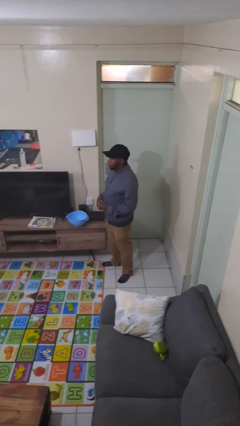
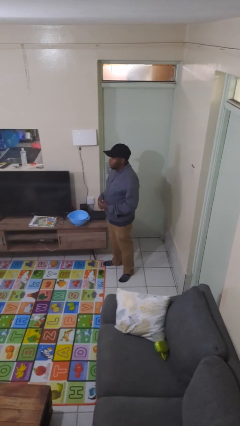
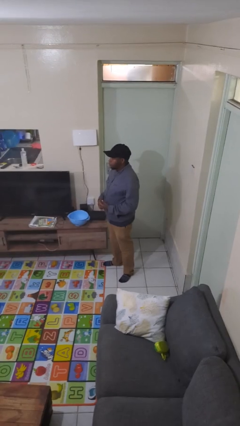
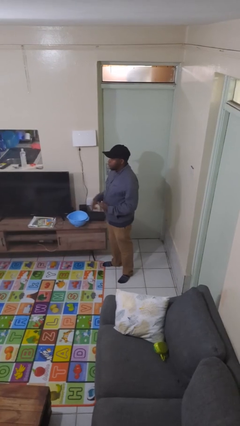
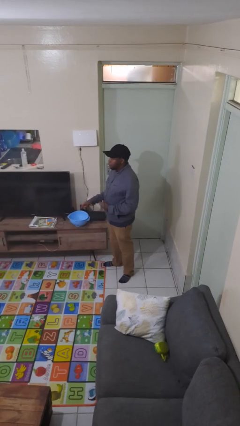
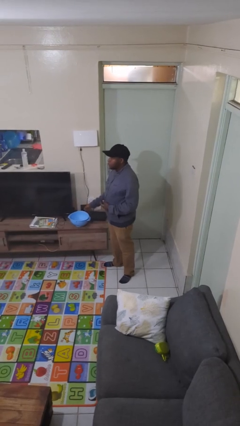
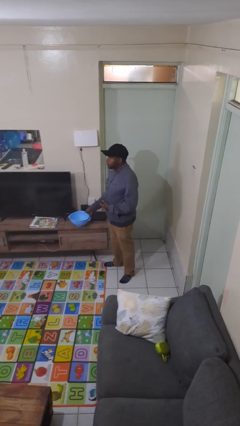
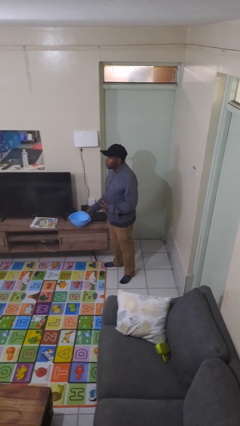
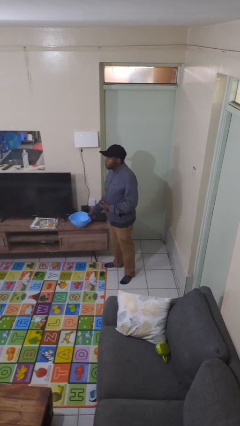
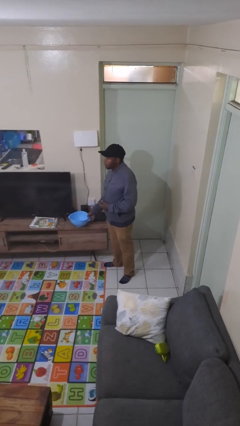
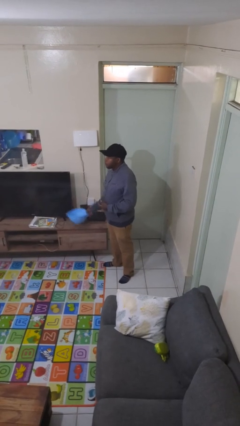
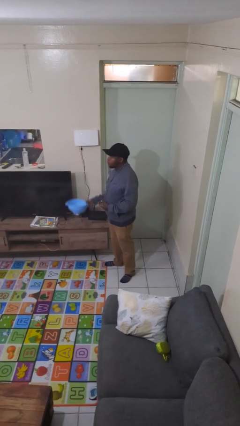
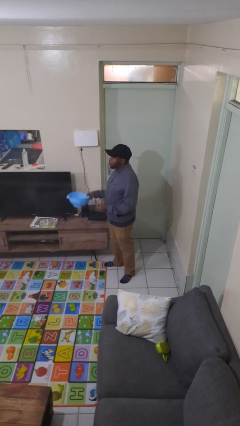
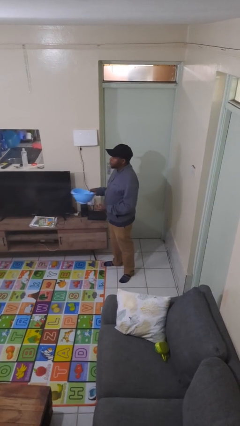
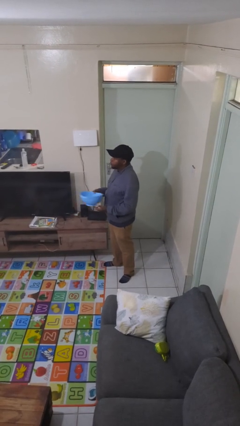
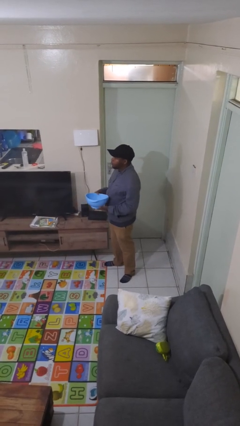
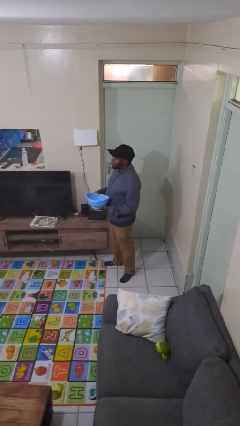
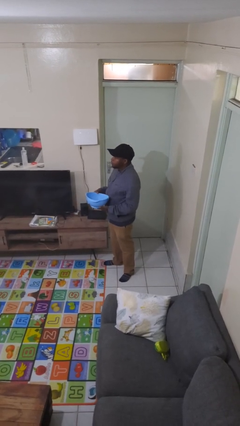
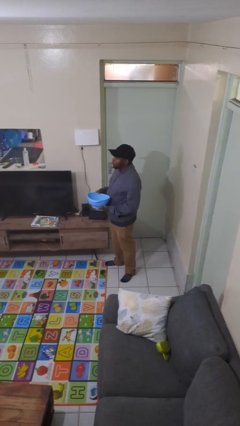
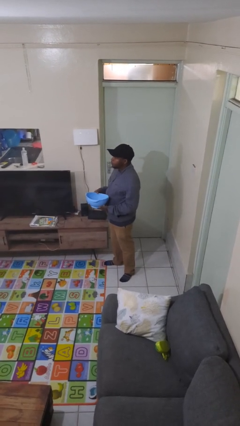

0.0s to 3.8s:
person picks up object from countertop

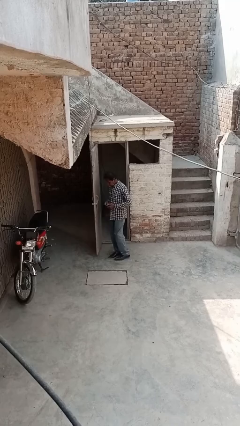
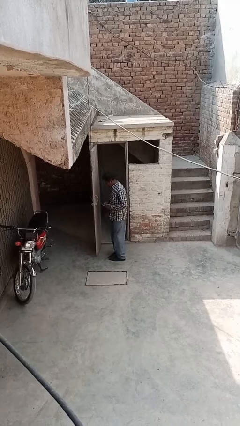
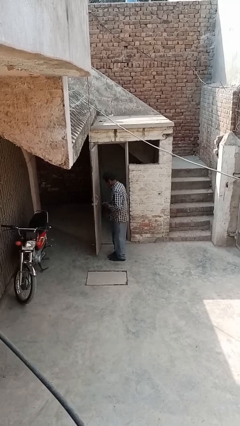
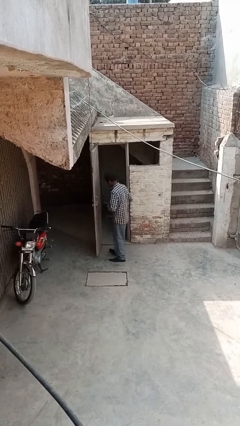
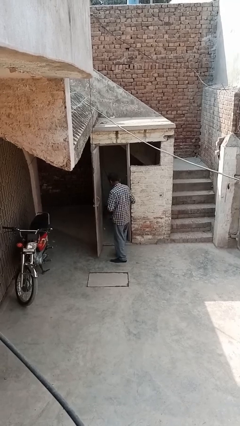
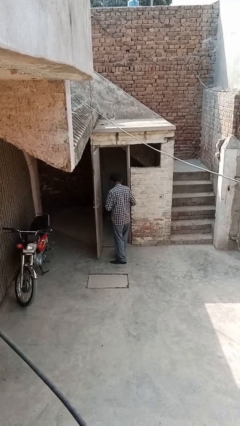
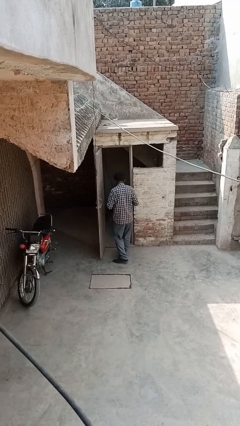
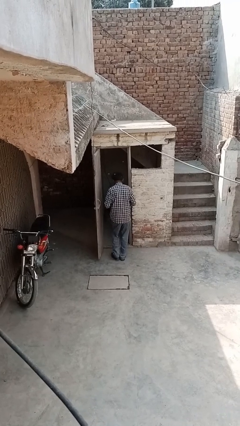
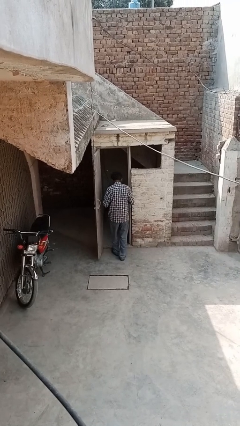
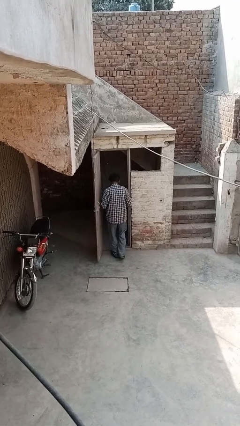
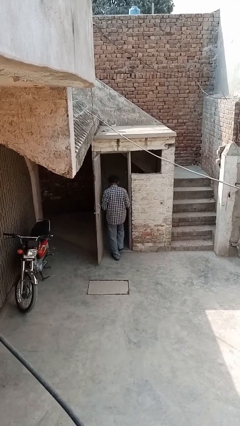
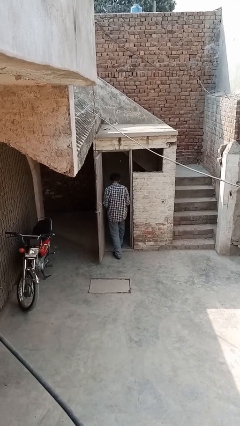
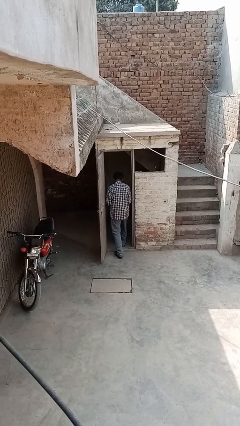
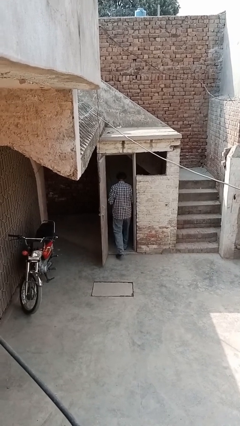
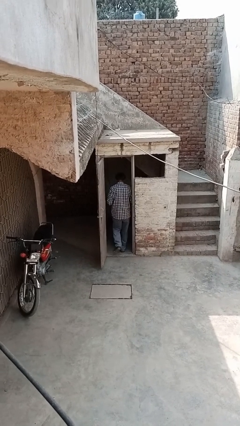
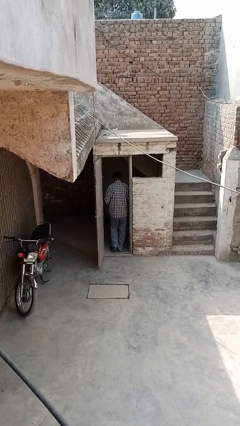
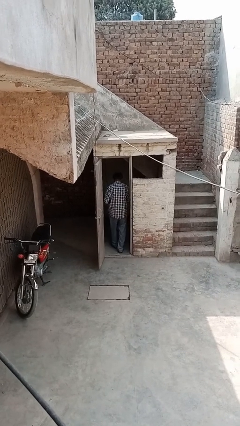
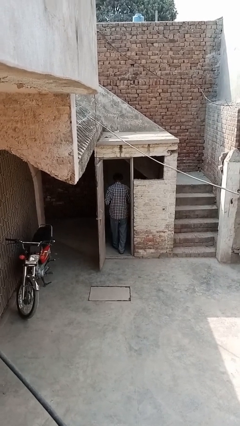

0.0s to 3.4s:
person exits scene through structure

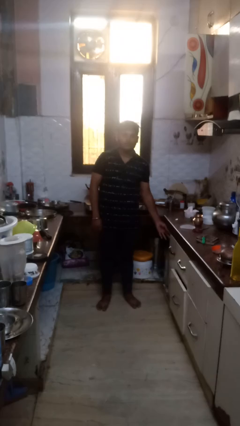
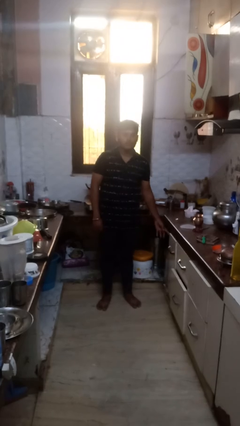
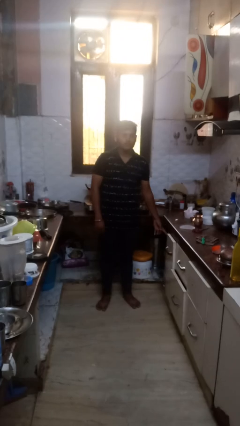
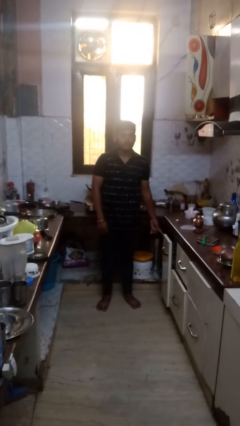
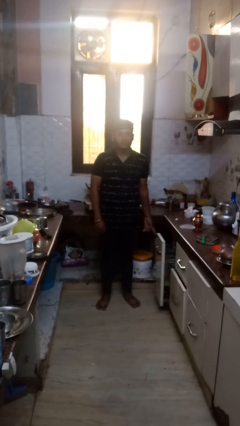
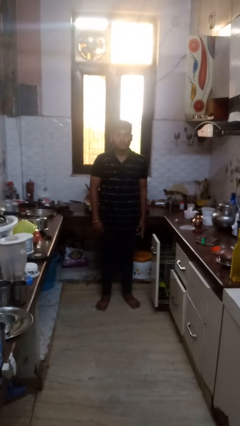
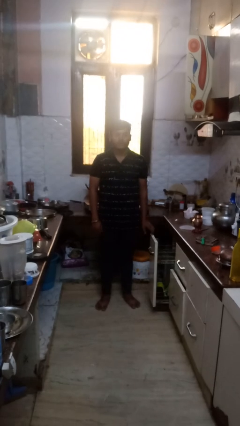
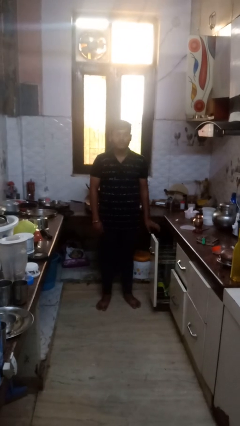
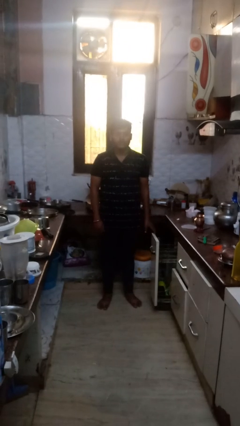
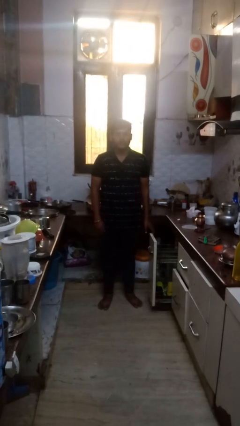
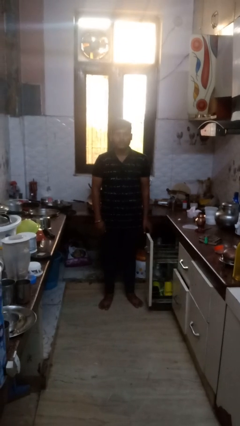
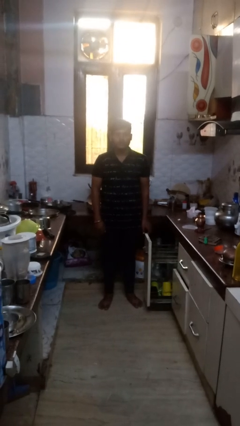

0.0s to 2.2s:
person opens dishwasher

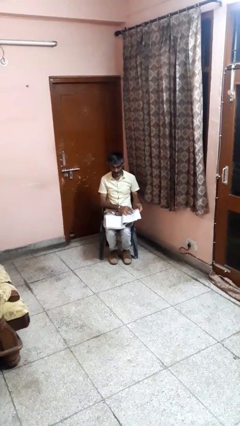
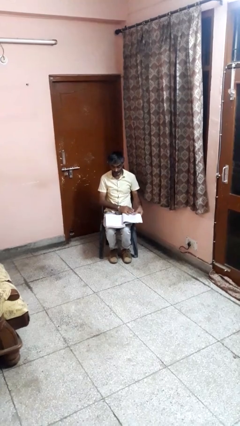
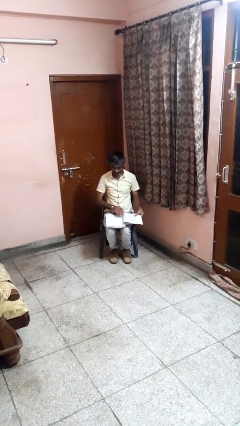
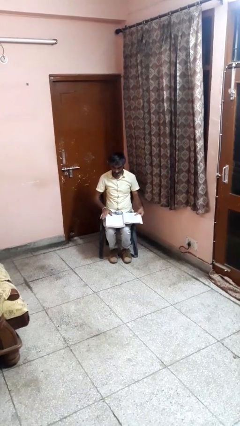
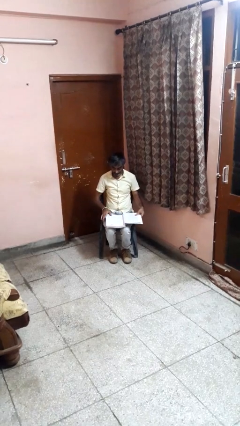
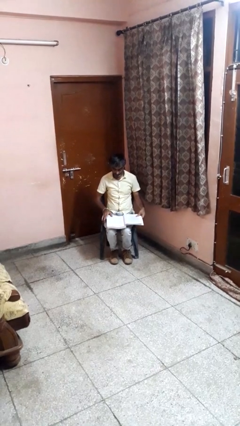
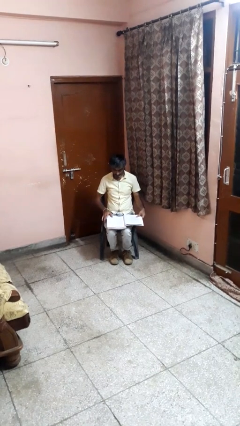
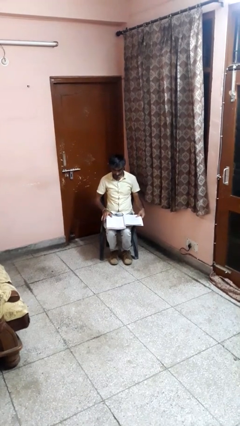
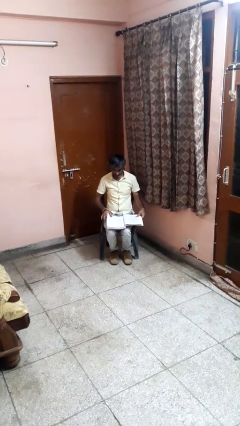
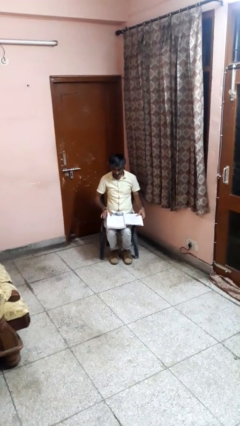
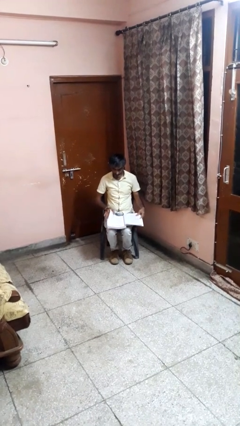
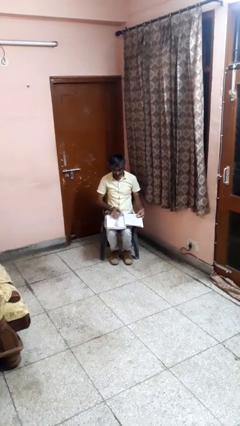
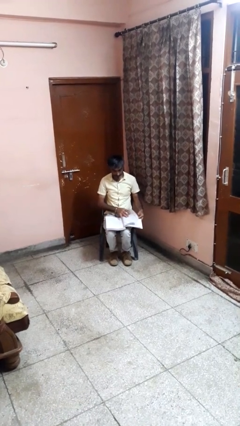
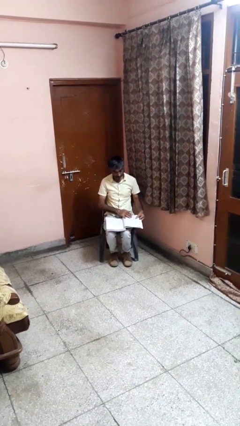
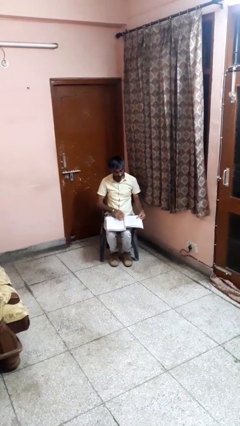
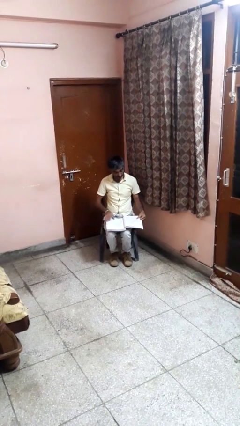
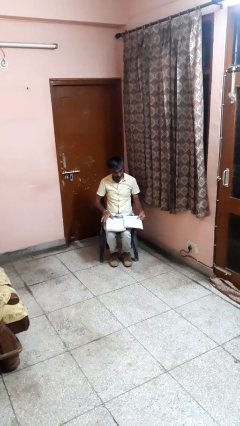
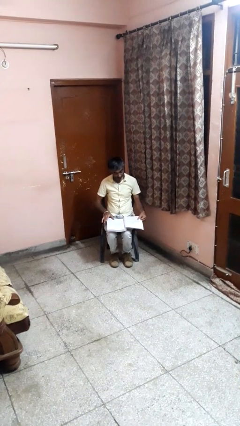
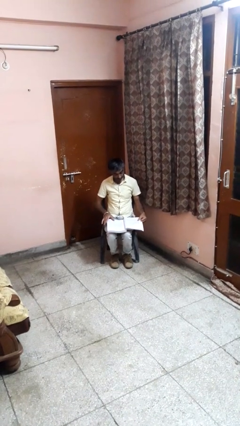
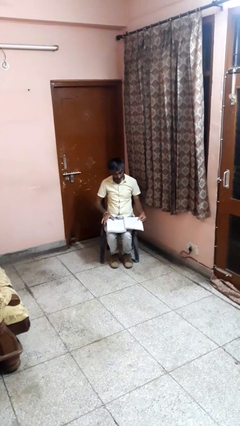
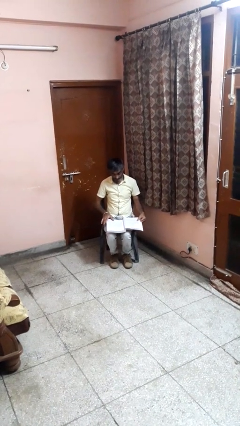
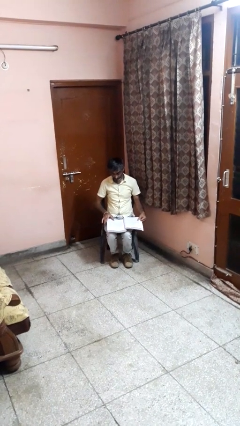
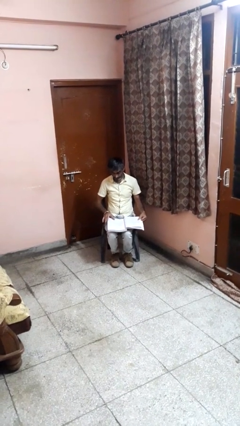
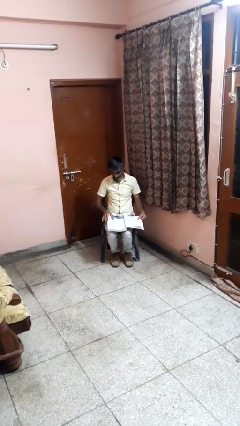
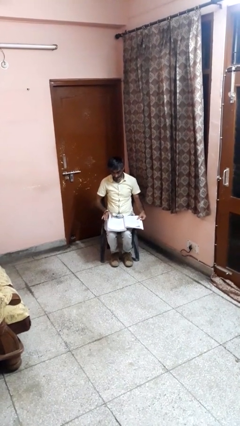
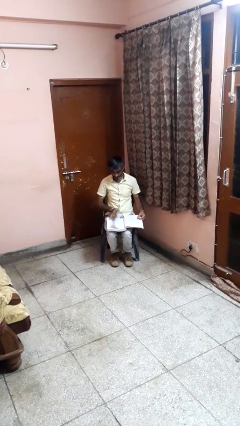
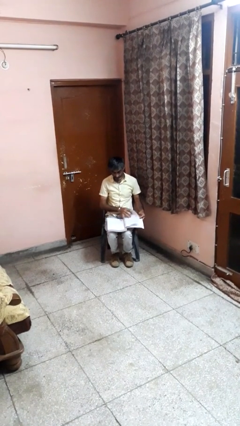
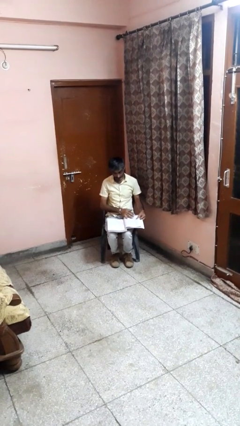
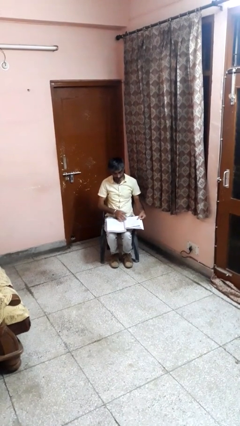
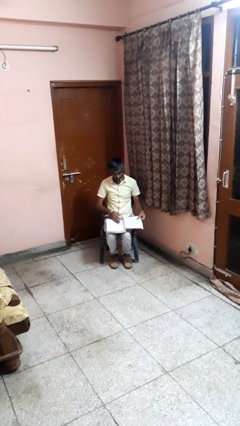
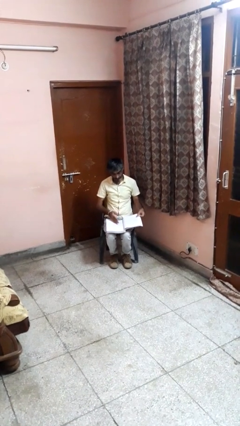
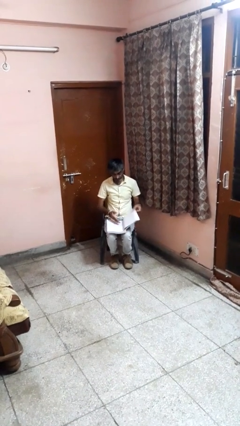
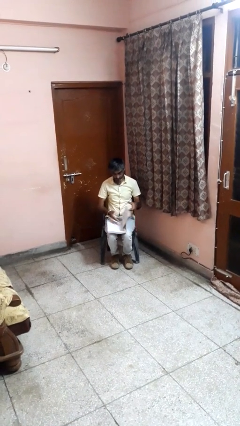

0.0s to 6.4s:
person reads book

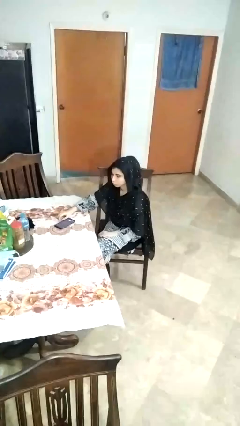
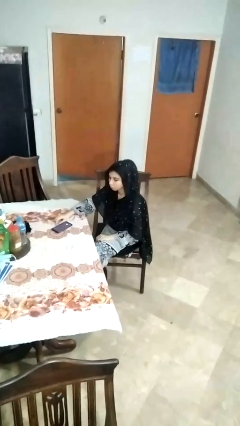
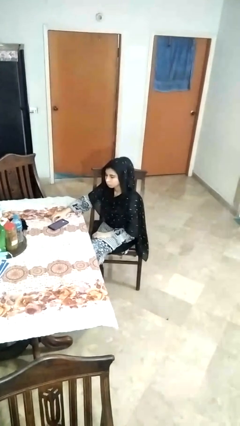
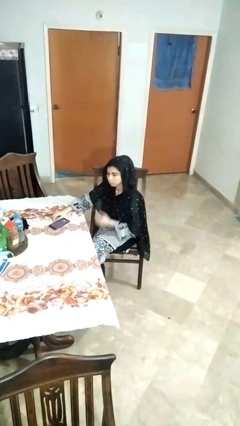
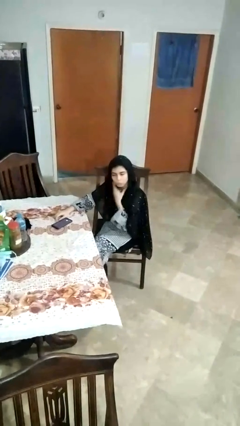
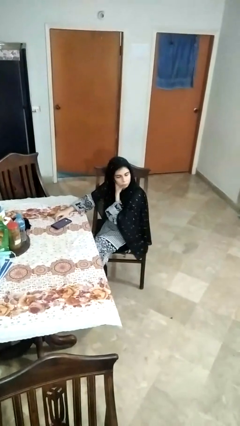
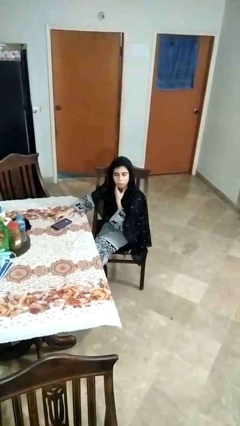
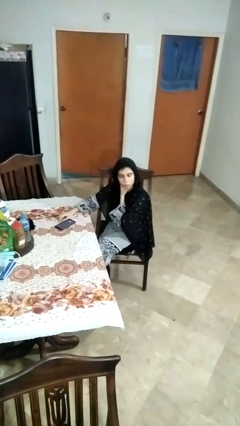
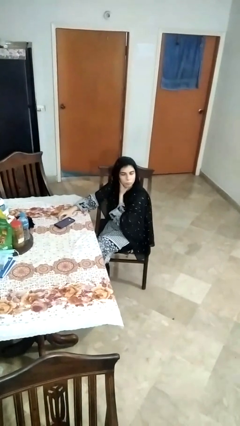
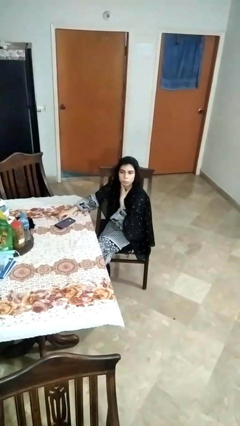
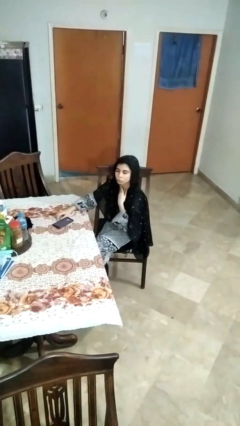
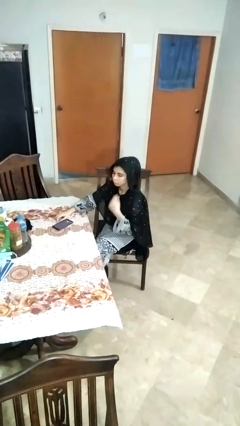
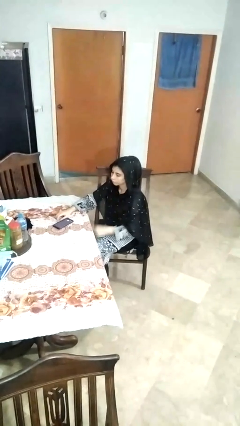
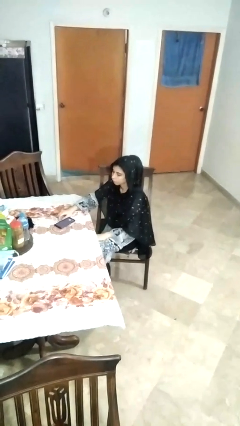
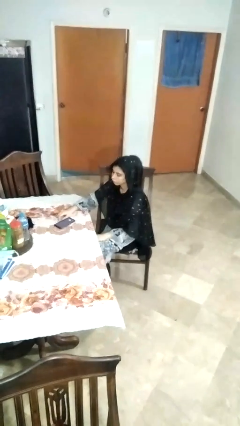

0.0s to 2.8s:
person rubs neck
